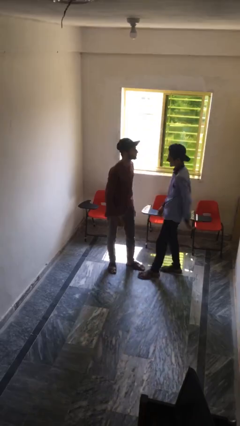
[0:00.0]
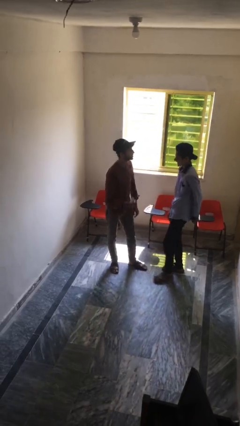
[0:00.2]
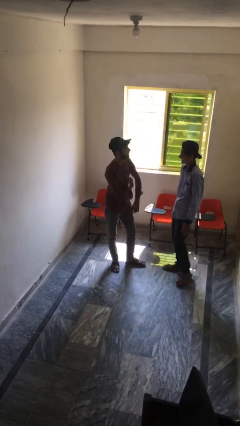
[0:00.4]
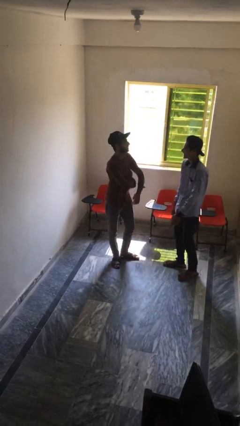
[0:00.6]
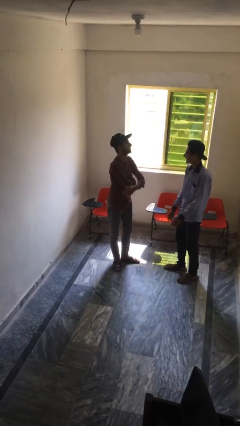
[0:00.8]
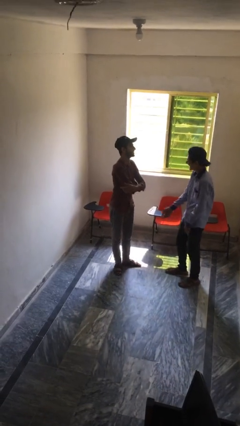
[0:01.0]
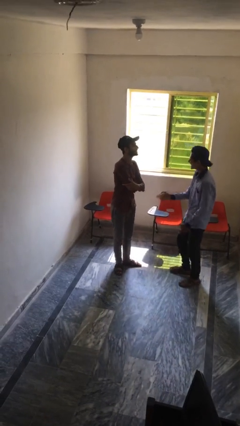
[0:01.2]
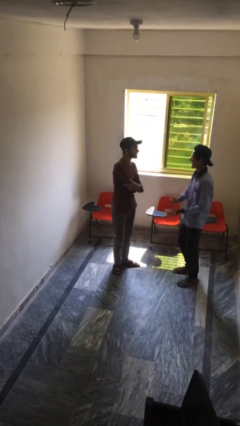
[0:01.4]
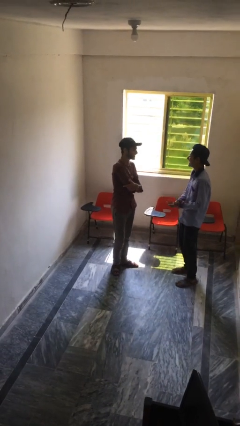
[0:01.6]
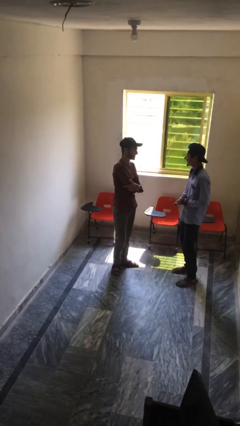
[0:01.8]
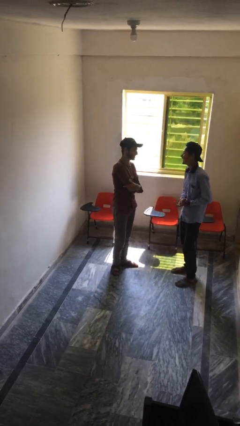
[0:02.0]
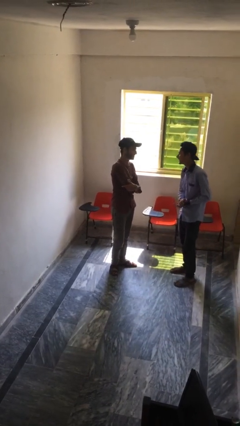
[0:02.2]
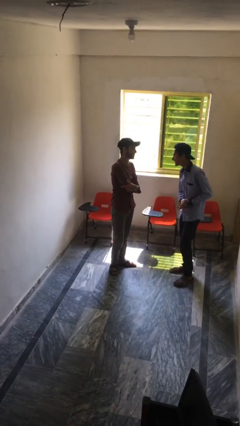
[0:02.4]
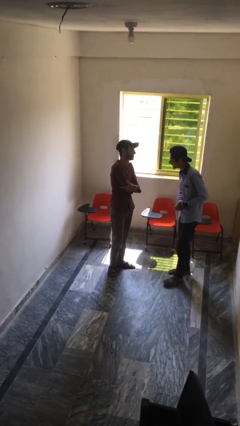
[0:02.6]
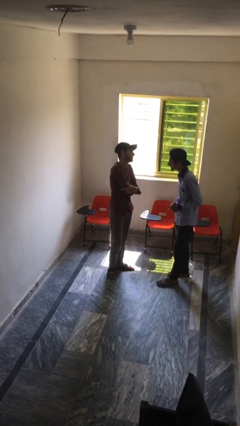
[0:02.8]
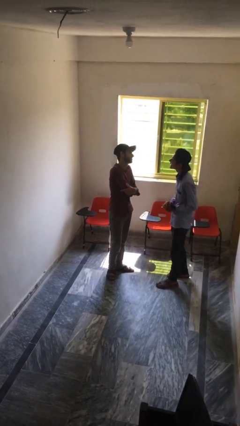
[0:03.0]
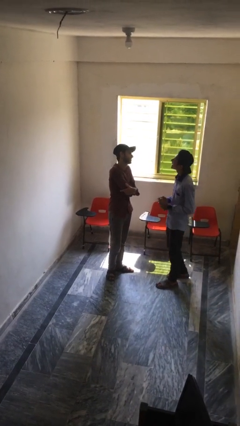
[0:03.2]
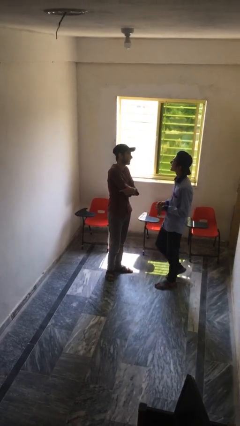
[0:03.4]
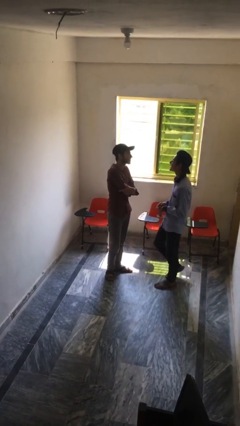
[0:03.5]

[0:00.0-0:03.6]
person talks to person

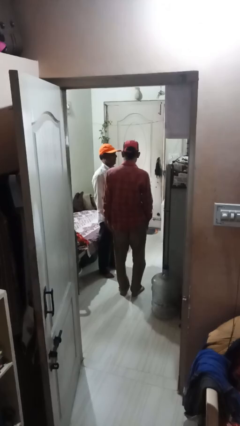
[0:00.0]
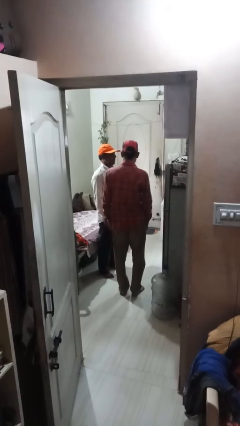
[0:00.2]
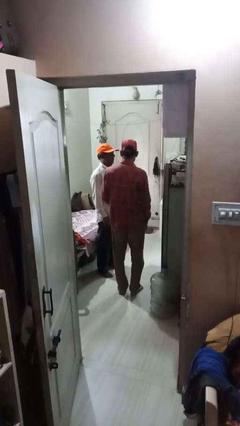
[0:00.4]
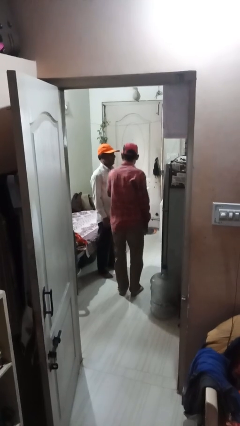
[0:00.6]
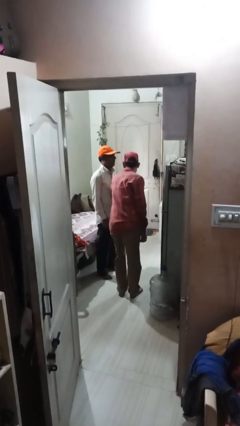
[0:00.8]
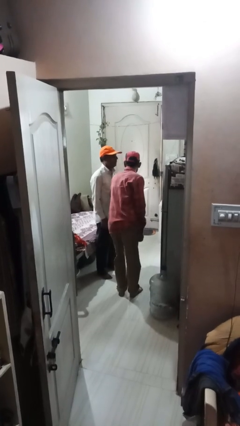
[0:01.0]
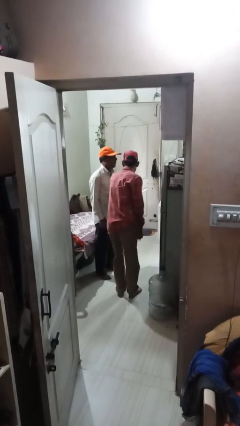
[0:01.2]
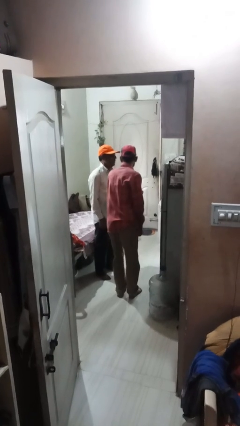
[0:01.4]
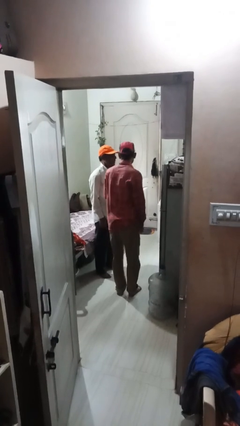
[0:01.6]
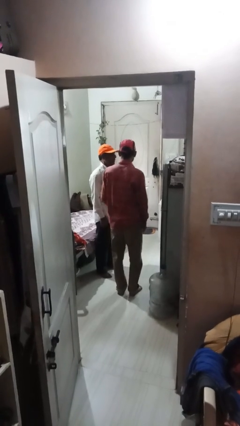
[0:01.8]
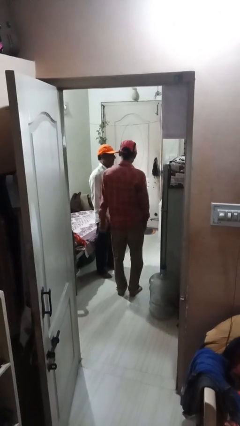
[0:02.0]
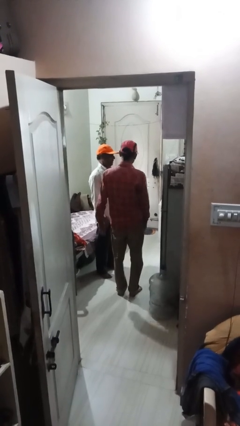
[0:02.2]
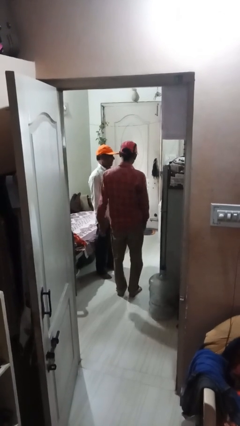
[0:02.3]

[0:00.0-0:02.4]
person nudges person with elbow

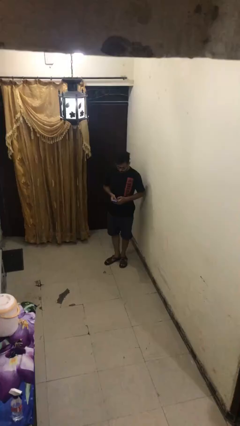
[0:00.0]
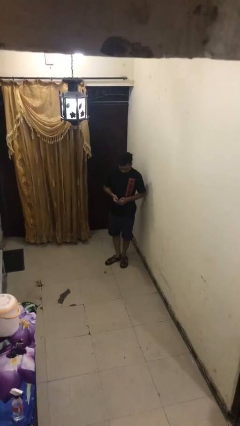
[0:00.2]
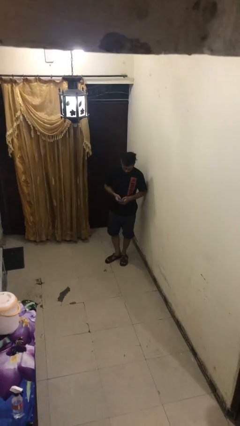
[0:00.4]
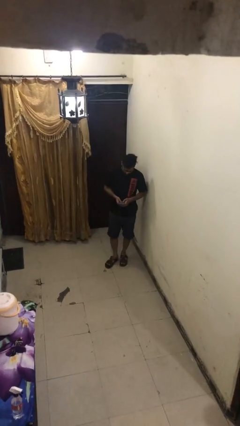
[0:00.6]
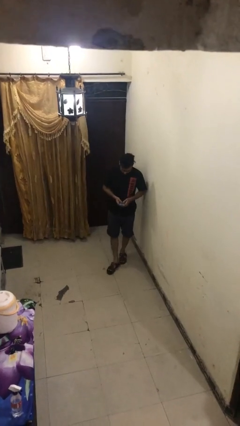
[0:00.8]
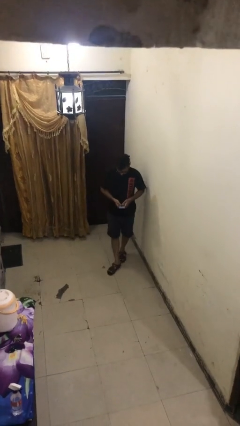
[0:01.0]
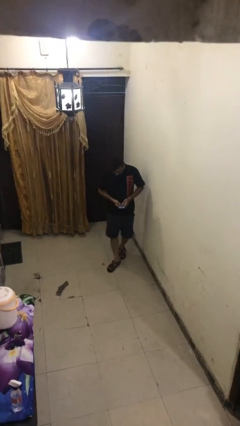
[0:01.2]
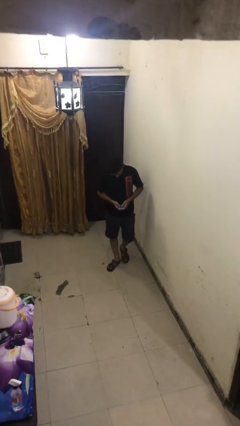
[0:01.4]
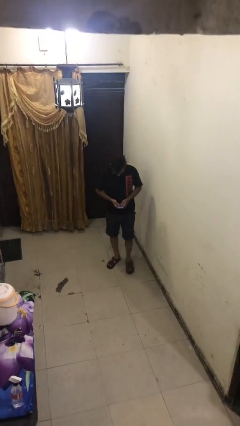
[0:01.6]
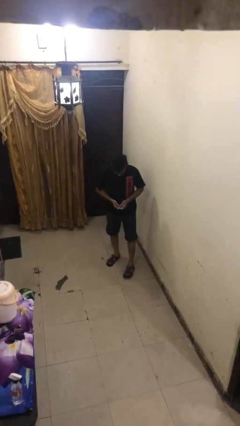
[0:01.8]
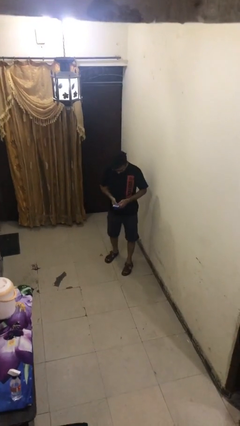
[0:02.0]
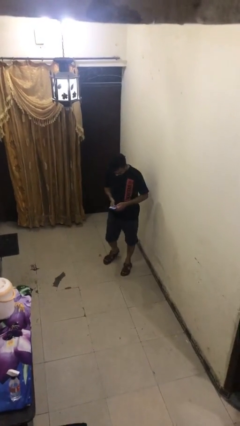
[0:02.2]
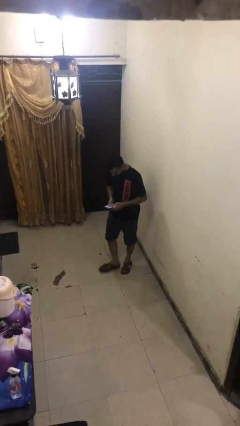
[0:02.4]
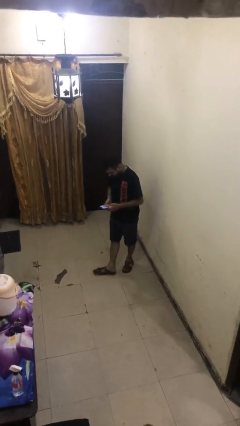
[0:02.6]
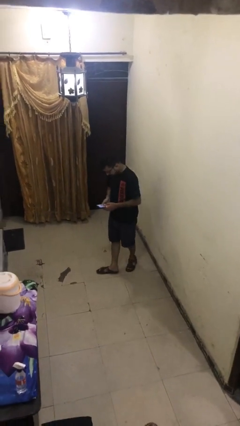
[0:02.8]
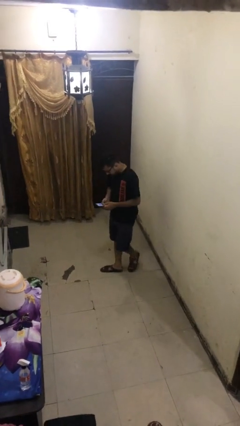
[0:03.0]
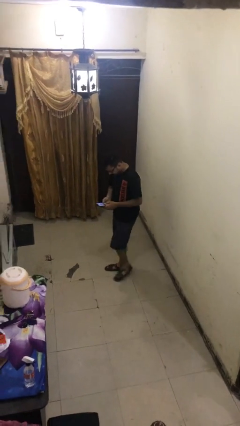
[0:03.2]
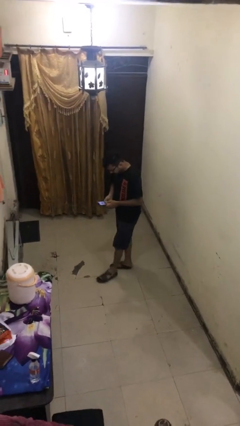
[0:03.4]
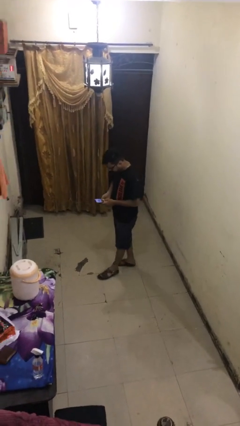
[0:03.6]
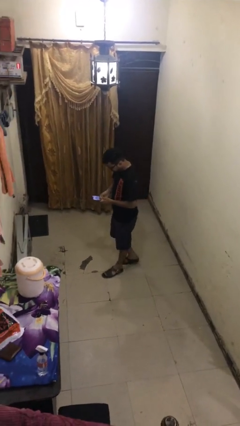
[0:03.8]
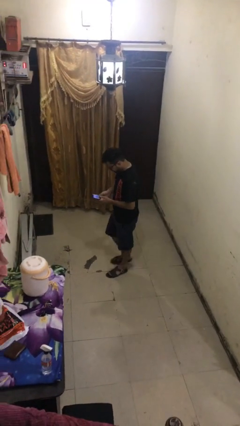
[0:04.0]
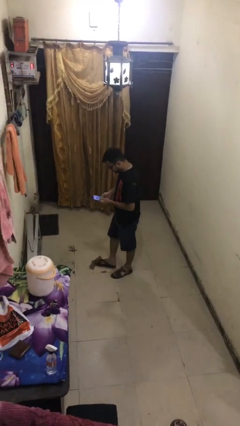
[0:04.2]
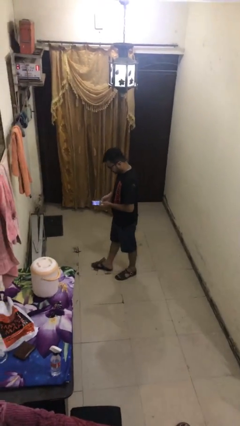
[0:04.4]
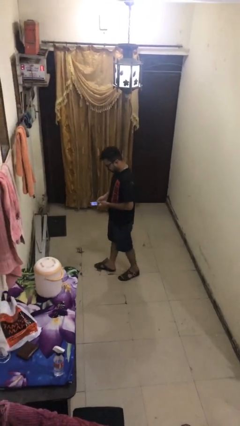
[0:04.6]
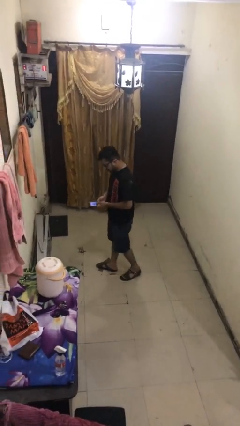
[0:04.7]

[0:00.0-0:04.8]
person texts on phone

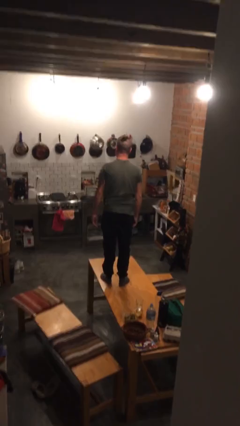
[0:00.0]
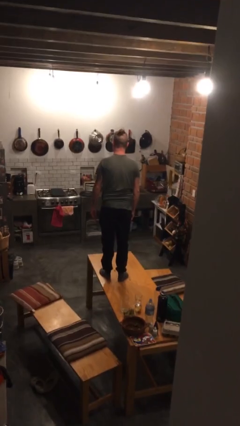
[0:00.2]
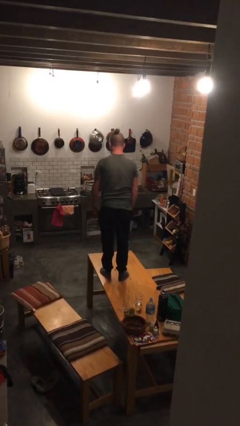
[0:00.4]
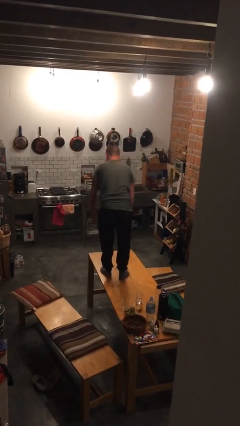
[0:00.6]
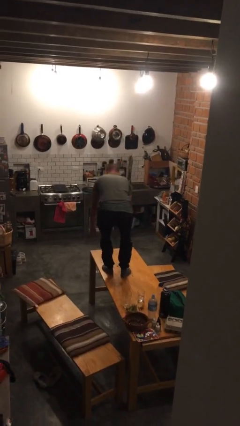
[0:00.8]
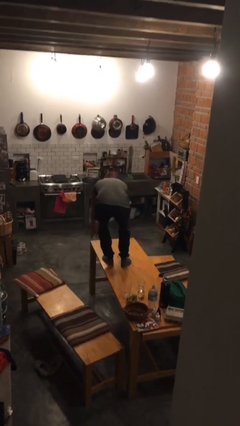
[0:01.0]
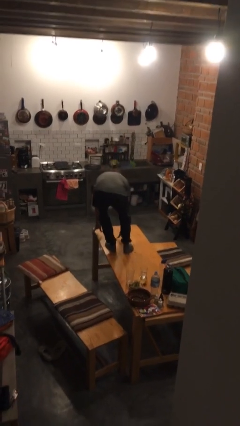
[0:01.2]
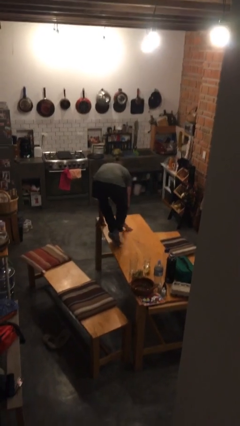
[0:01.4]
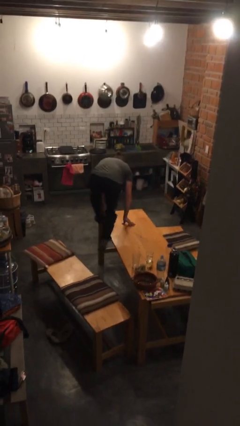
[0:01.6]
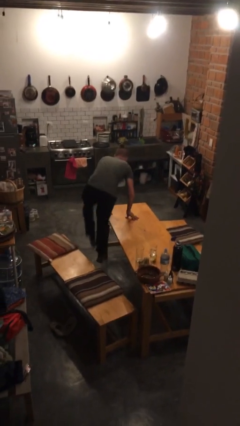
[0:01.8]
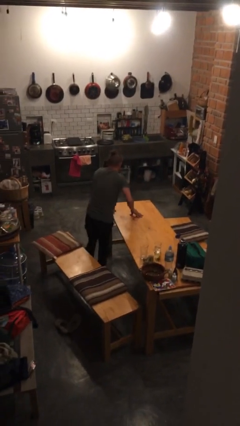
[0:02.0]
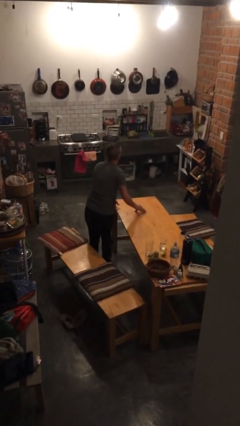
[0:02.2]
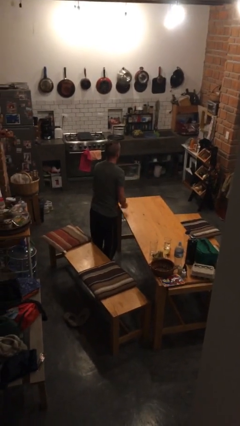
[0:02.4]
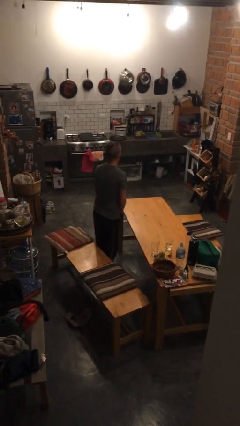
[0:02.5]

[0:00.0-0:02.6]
person climbs off table

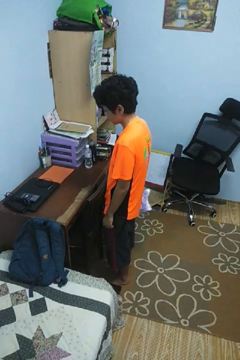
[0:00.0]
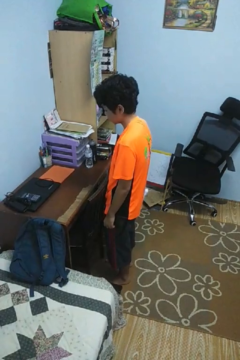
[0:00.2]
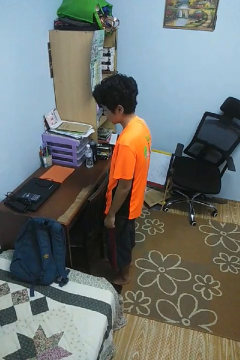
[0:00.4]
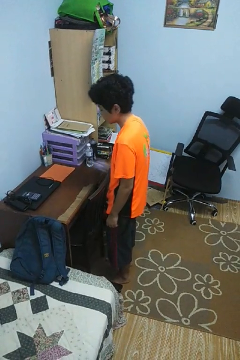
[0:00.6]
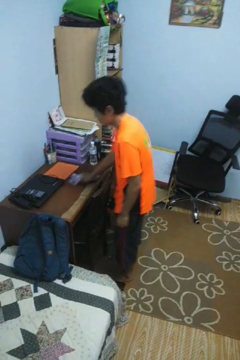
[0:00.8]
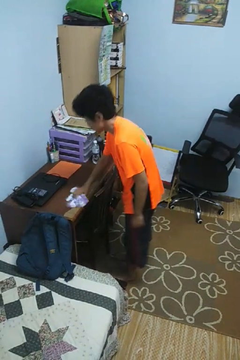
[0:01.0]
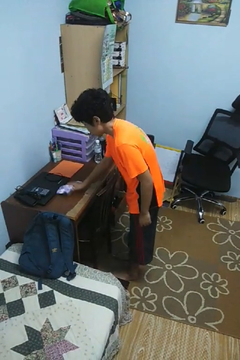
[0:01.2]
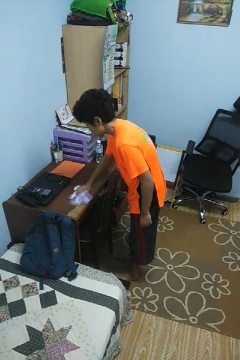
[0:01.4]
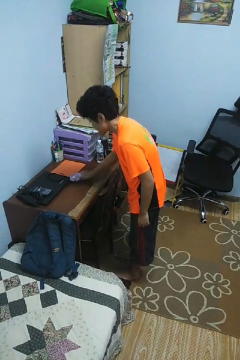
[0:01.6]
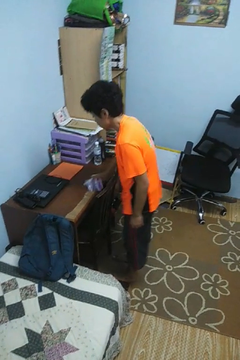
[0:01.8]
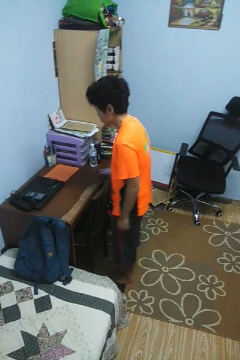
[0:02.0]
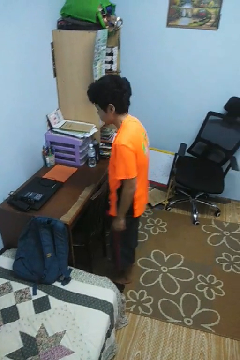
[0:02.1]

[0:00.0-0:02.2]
person cleans table with rag

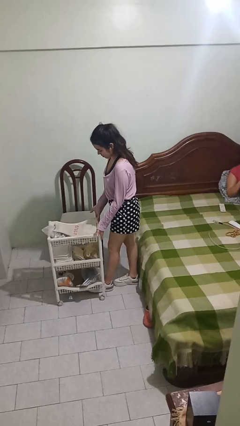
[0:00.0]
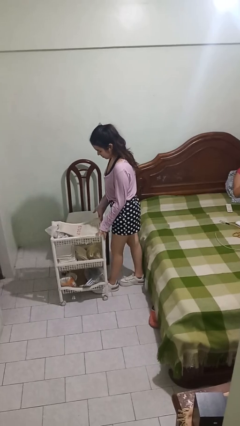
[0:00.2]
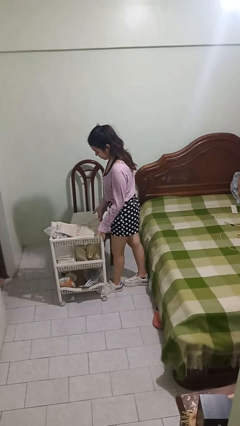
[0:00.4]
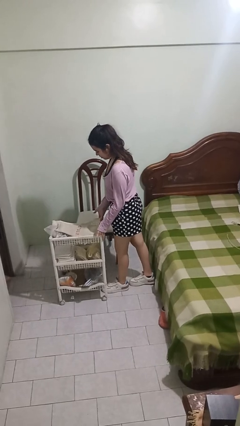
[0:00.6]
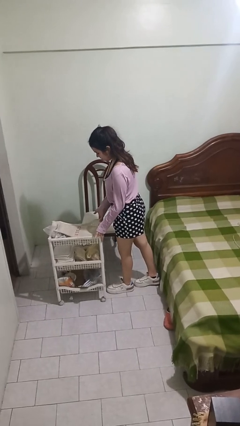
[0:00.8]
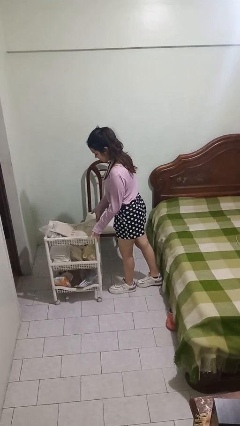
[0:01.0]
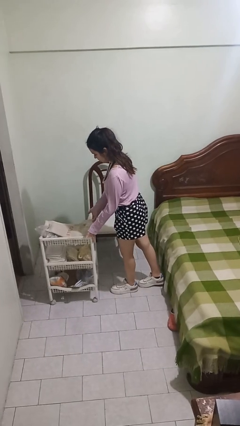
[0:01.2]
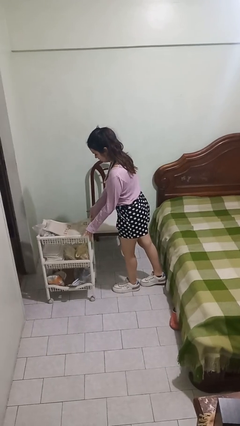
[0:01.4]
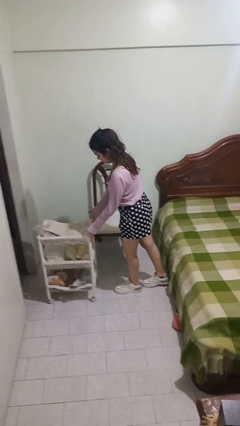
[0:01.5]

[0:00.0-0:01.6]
person pushes wheeled cart

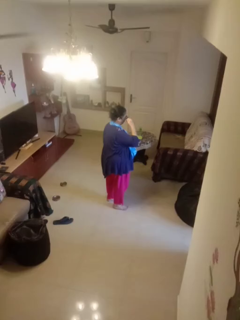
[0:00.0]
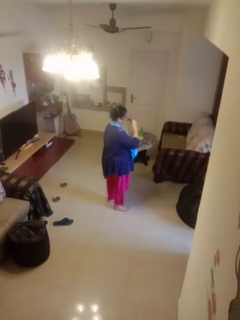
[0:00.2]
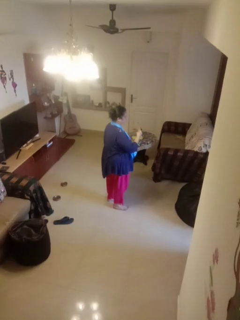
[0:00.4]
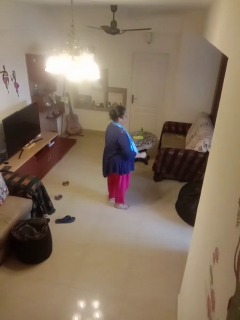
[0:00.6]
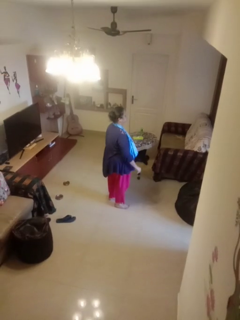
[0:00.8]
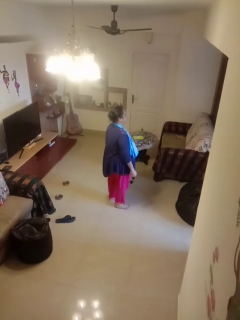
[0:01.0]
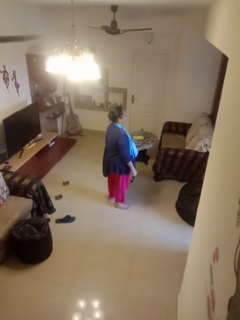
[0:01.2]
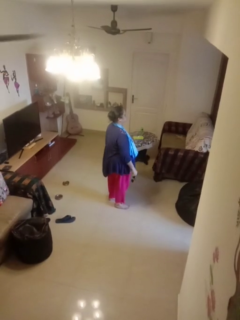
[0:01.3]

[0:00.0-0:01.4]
person takes off sunglasses
